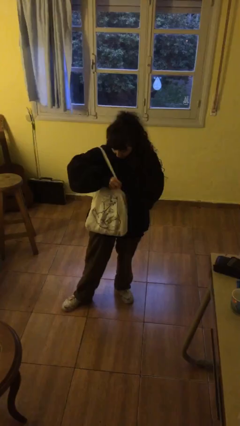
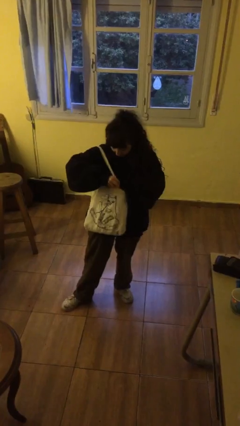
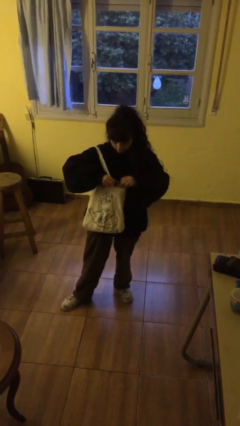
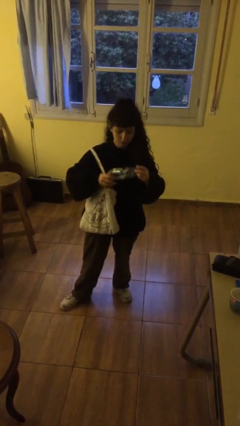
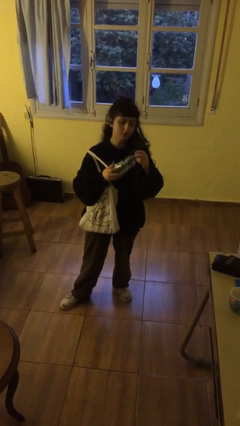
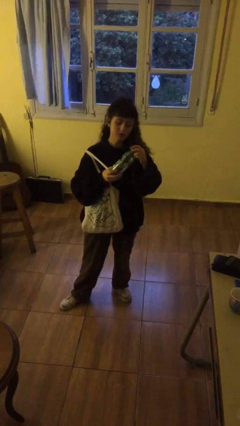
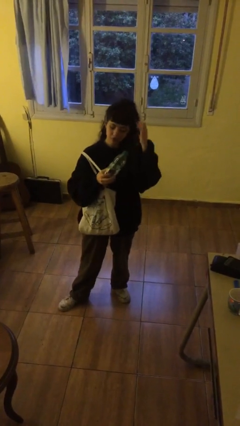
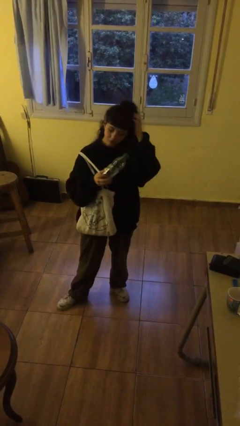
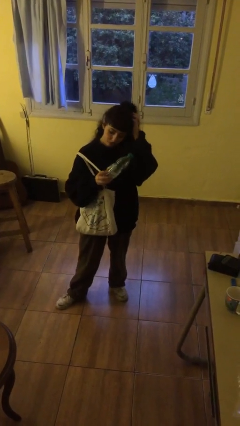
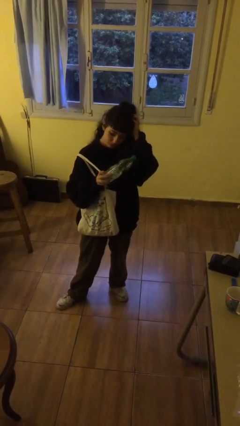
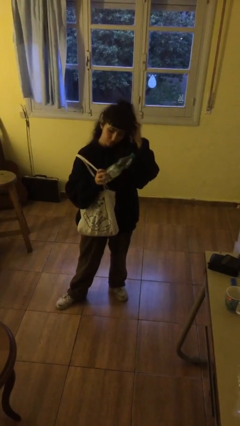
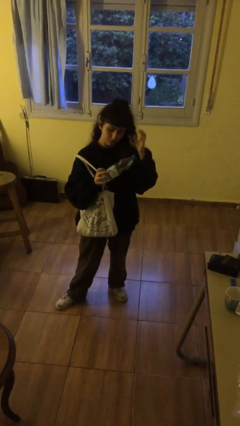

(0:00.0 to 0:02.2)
person takes object from purse

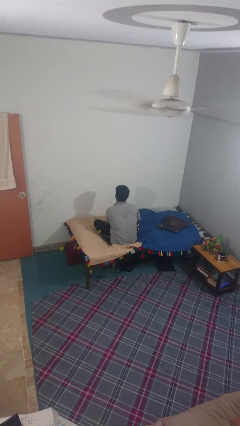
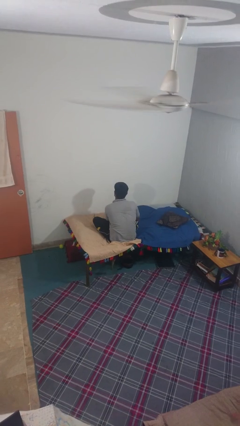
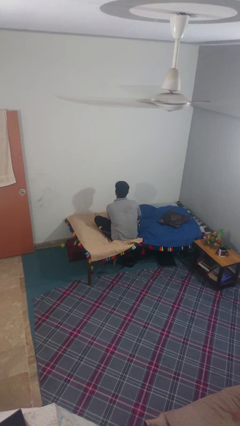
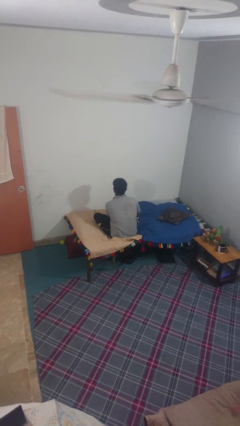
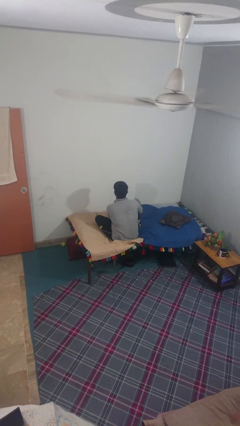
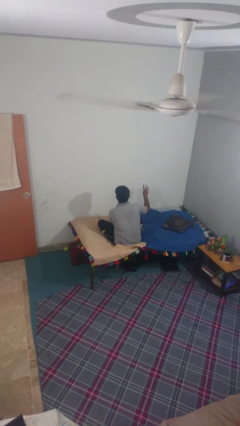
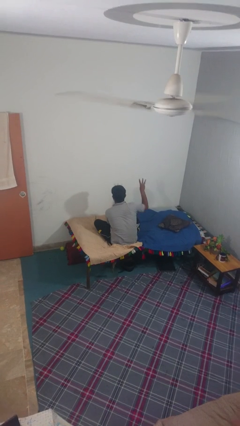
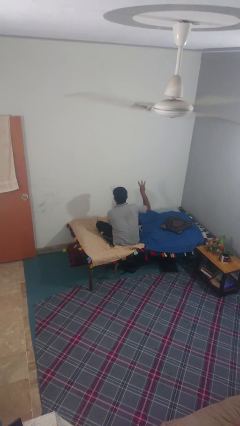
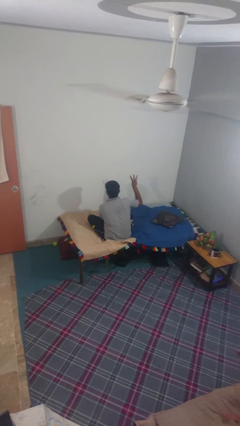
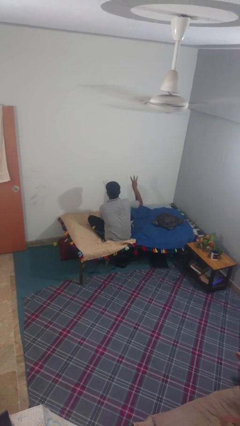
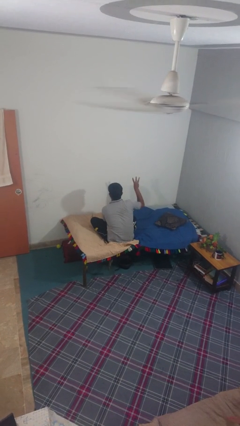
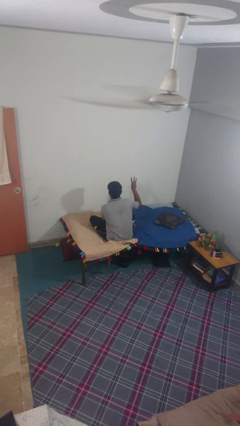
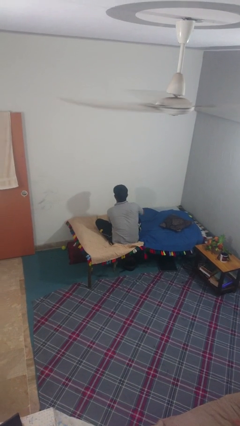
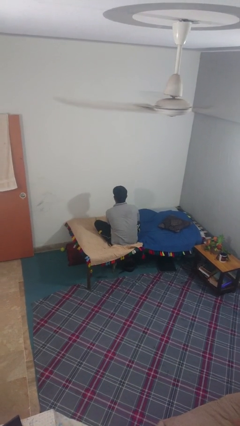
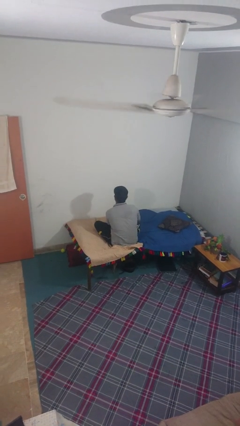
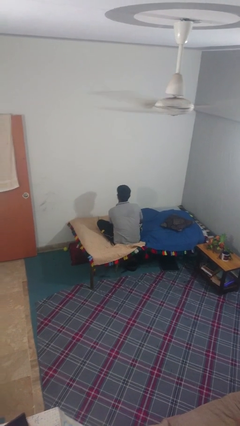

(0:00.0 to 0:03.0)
person gestures number three

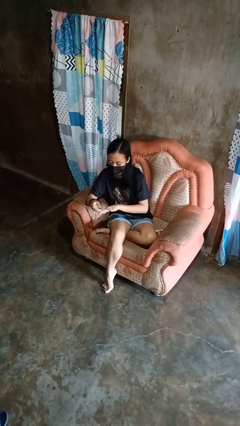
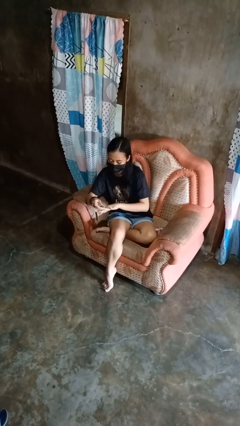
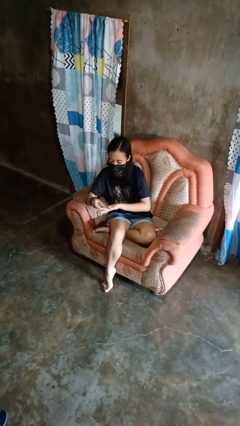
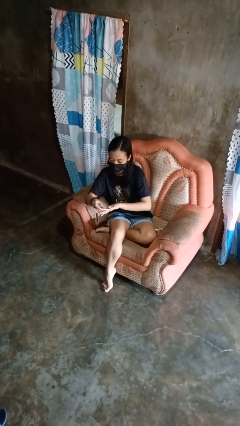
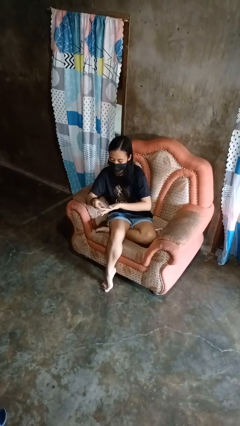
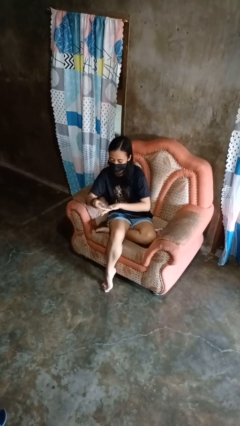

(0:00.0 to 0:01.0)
person clips fingernails

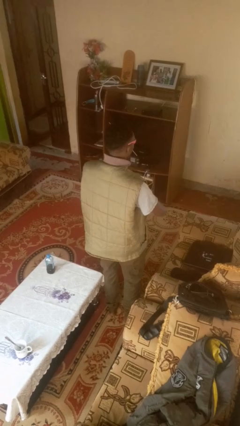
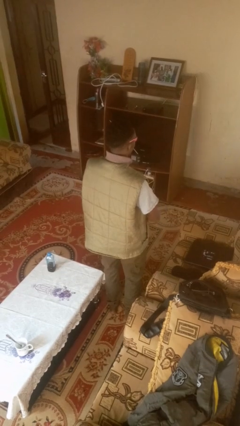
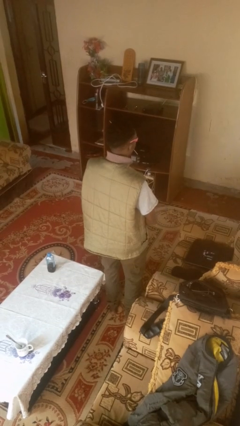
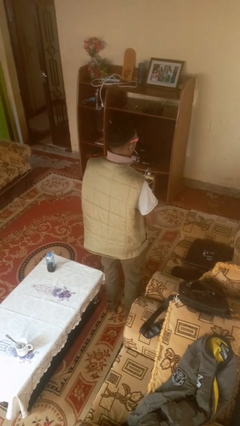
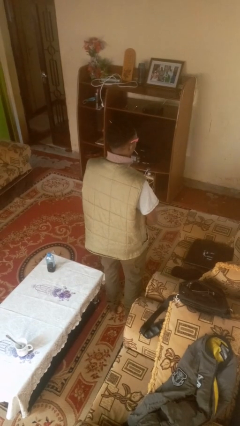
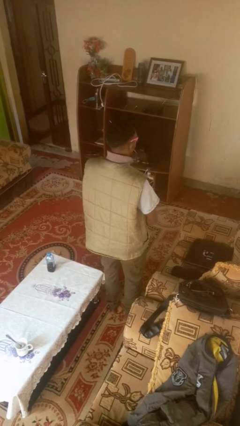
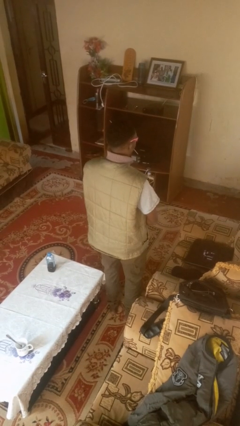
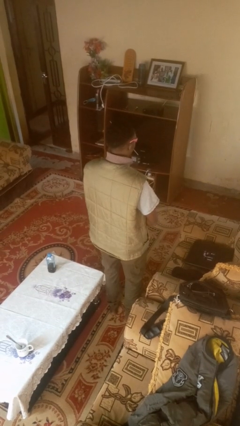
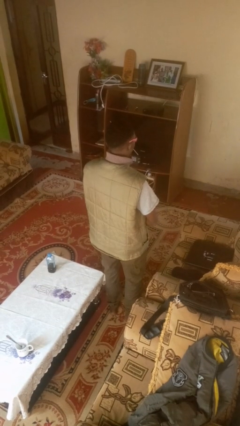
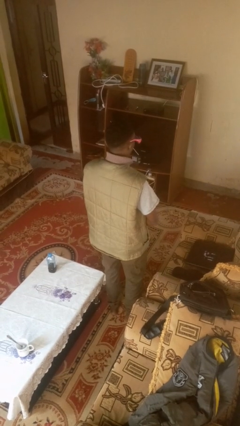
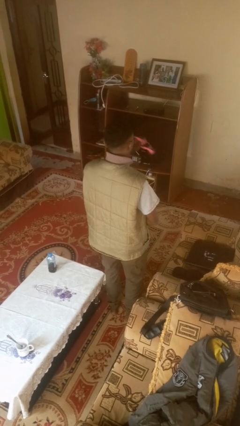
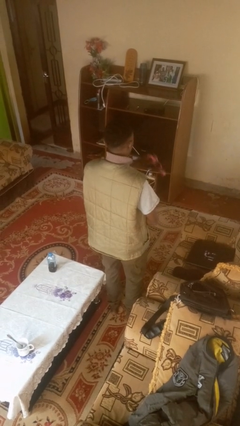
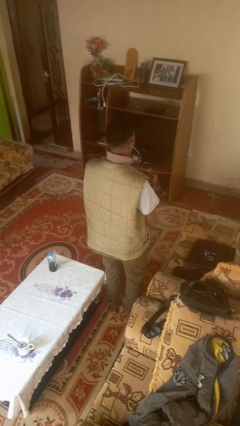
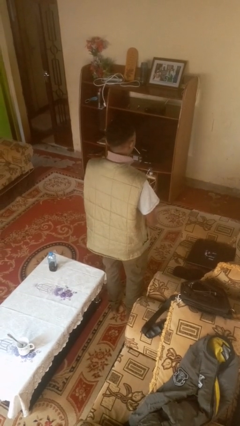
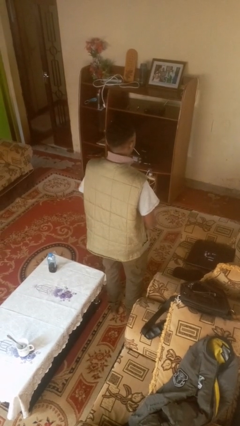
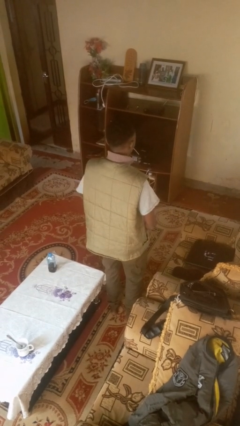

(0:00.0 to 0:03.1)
person takes off sunglasses

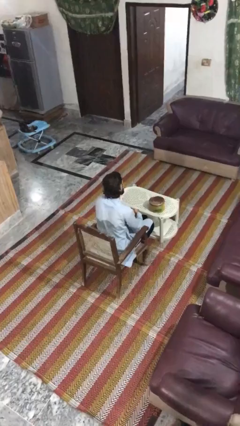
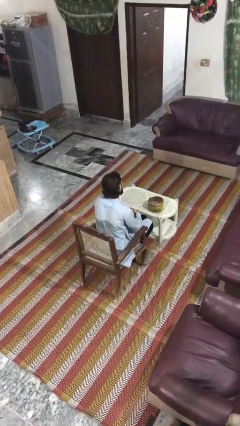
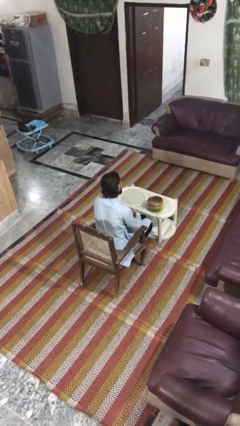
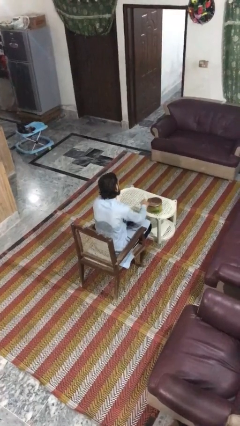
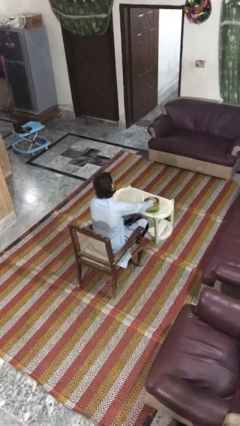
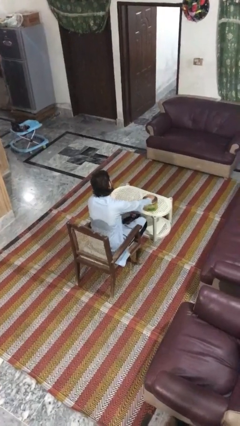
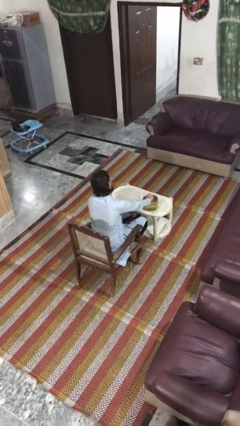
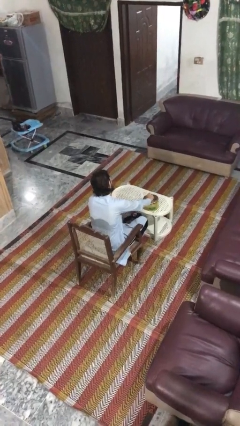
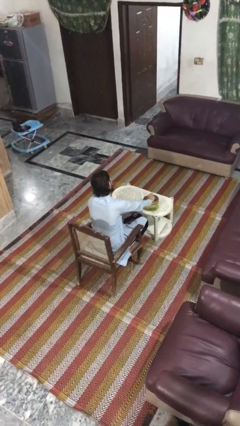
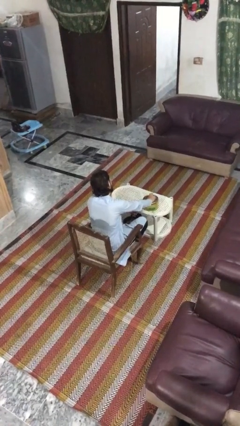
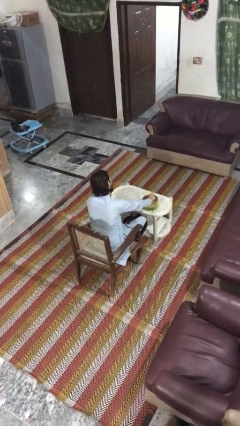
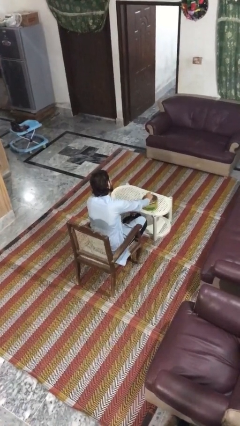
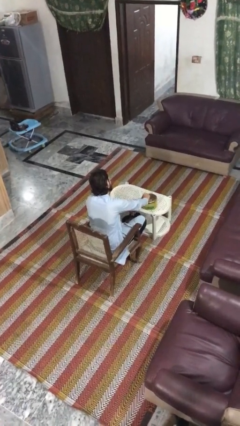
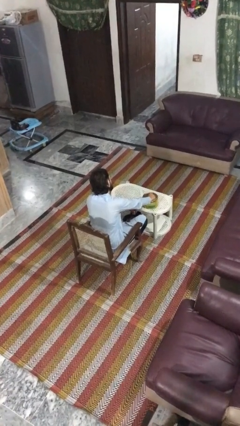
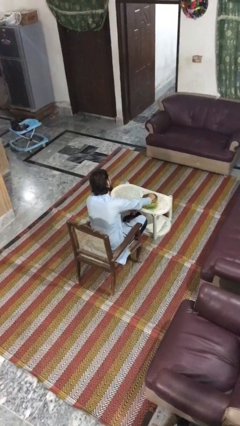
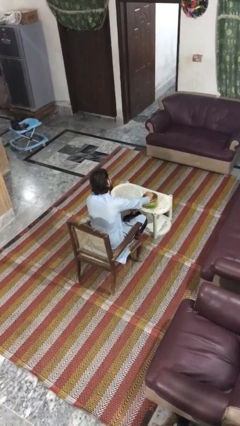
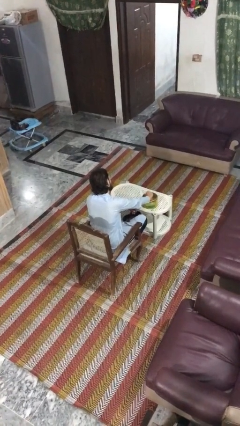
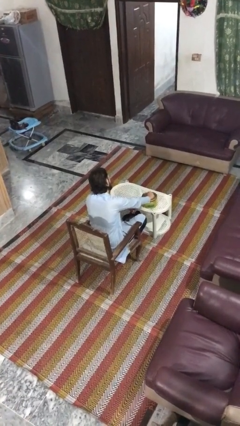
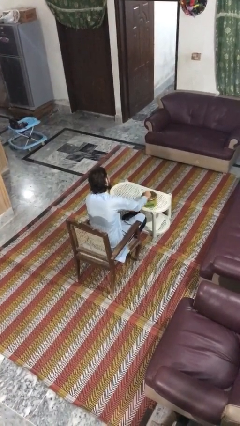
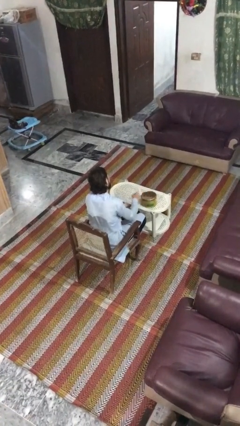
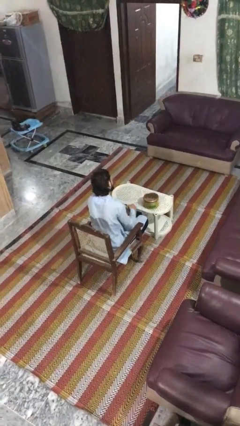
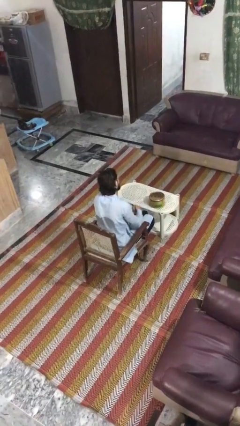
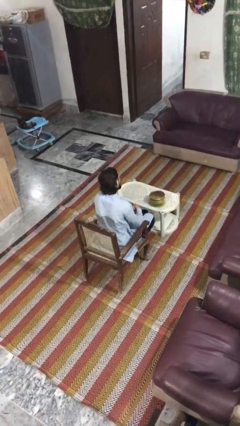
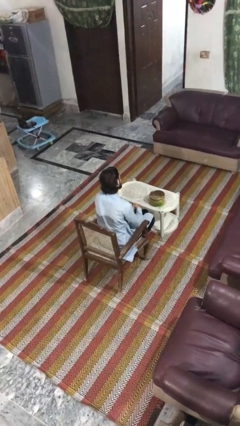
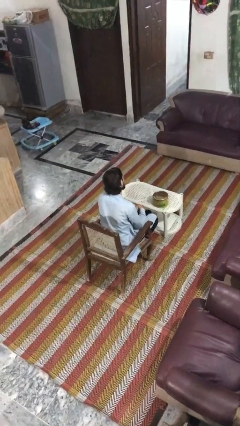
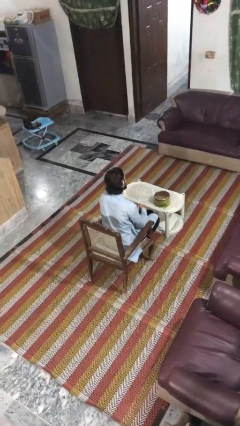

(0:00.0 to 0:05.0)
person taps object with finger

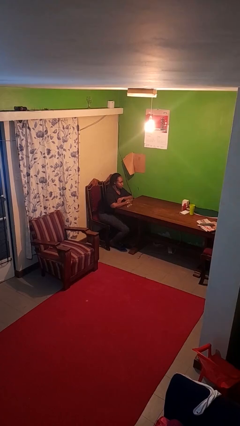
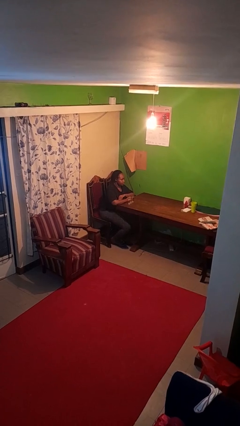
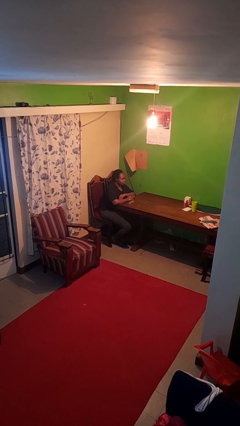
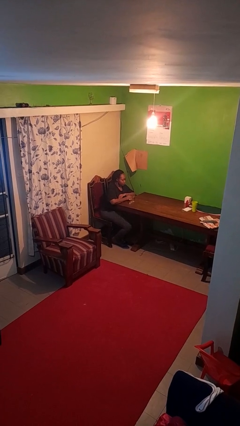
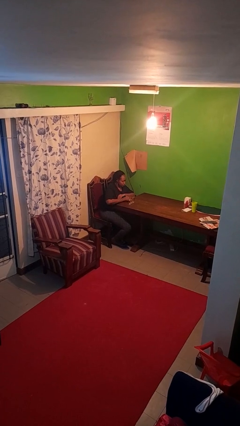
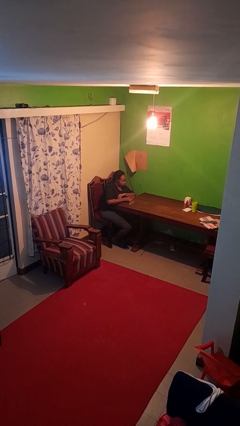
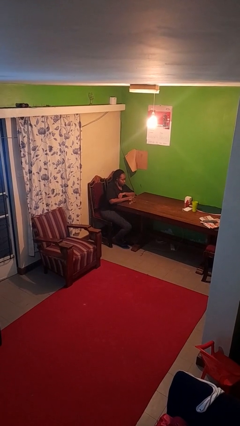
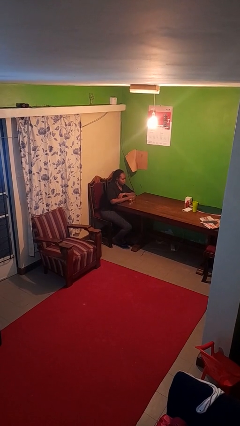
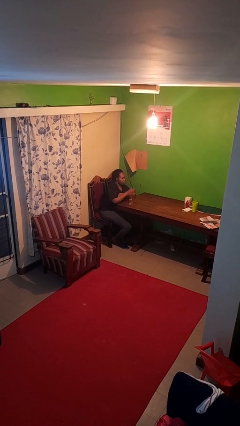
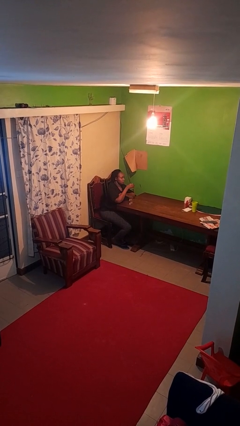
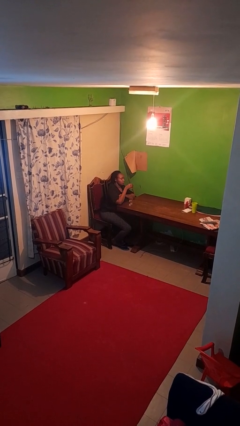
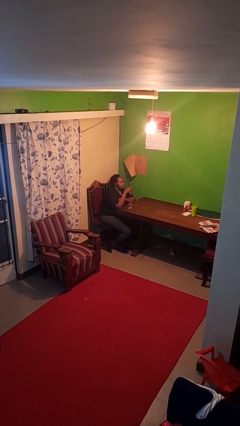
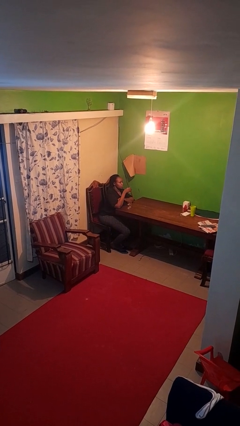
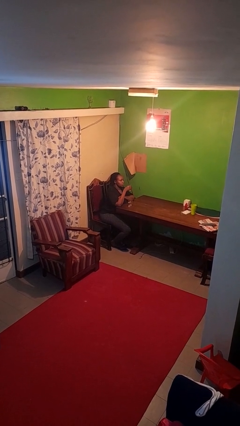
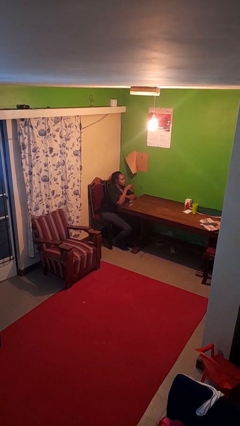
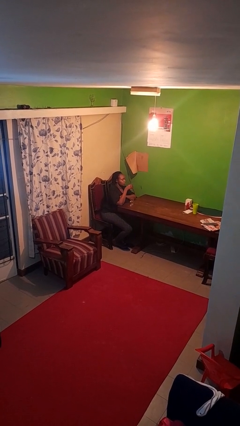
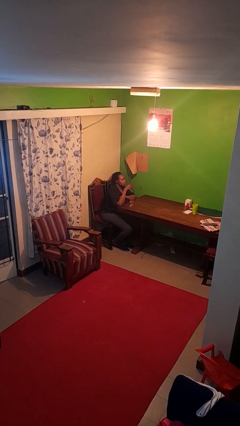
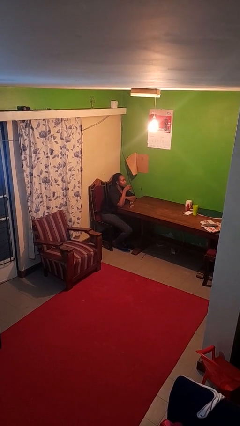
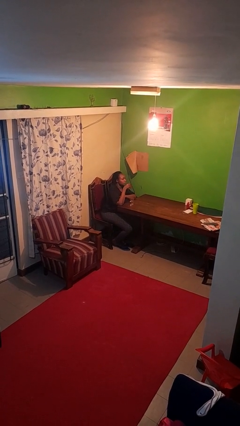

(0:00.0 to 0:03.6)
person picks up object from table
